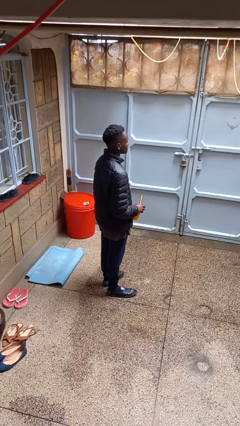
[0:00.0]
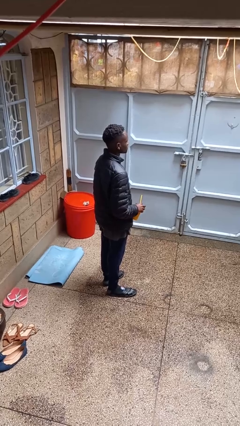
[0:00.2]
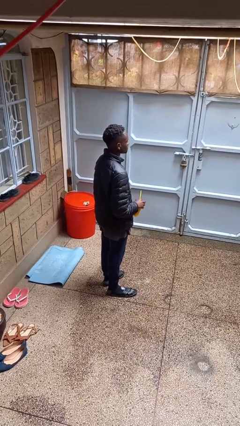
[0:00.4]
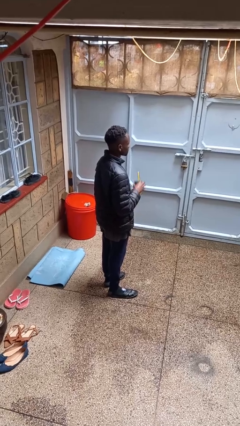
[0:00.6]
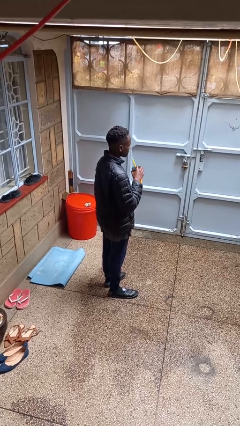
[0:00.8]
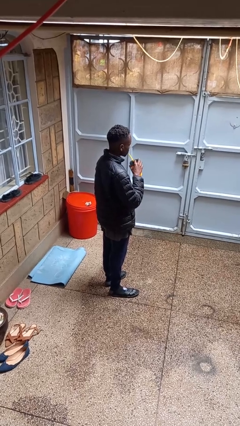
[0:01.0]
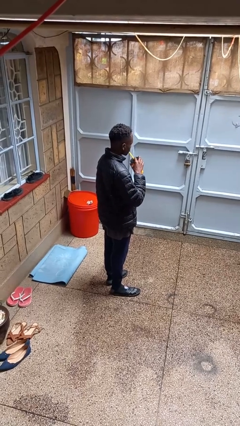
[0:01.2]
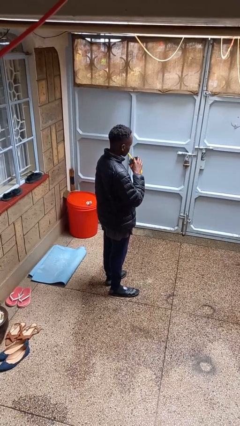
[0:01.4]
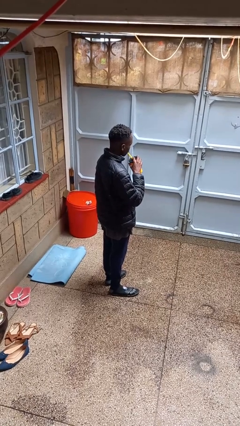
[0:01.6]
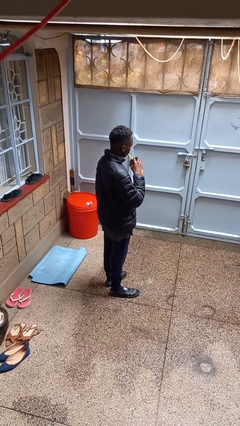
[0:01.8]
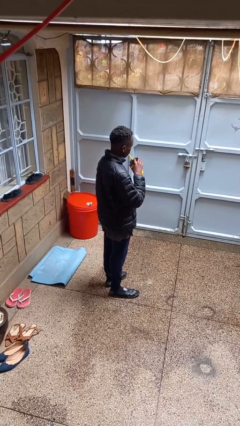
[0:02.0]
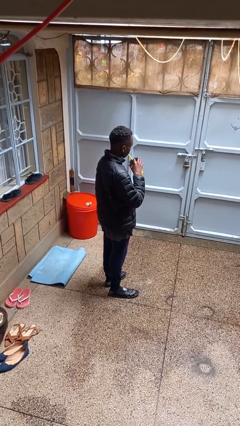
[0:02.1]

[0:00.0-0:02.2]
person drinks from straw

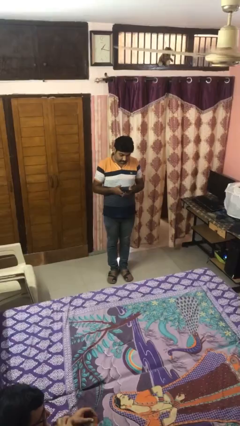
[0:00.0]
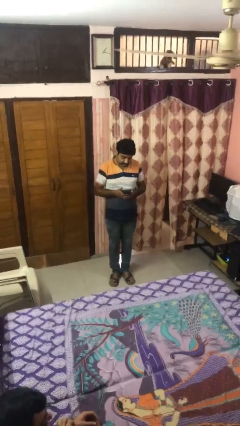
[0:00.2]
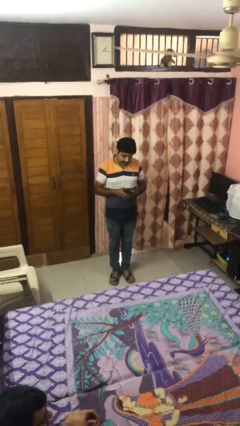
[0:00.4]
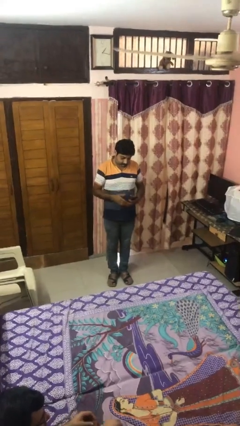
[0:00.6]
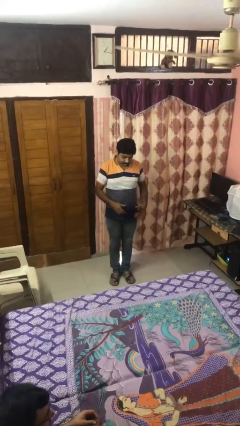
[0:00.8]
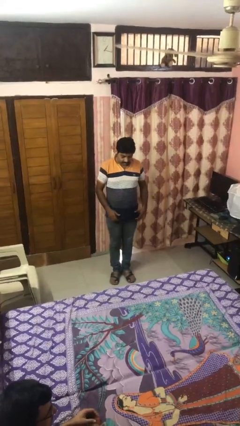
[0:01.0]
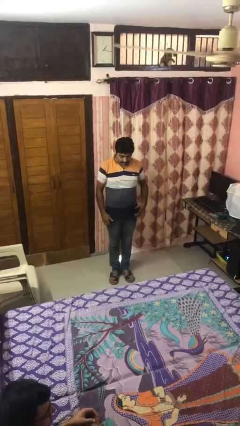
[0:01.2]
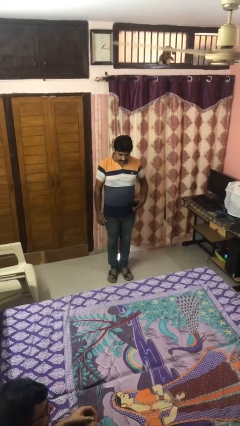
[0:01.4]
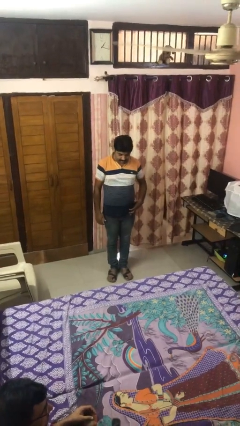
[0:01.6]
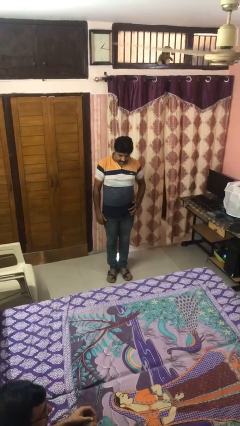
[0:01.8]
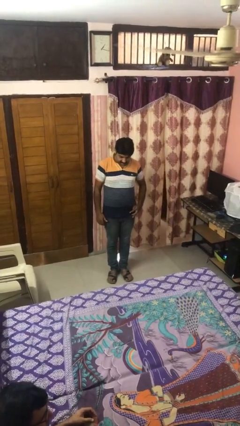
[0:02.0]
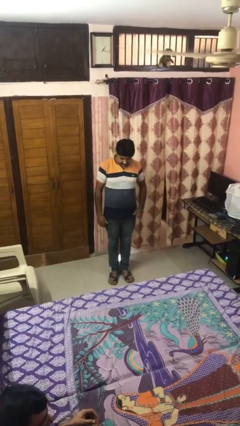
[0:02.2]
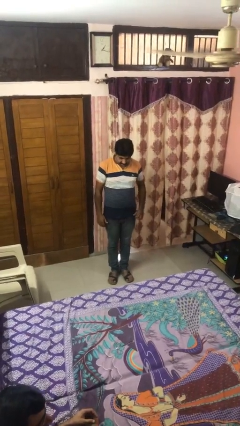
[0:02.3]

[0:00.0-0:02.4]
person puts phone into pocket

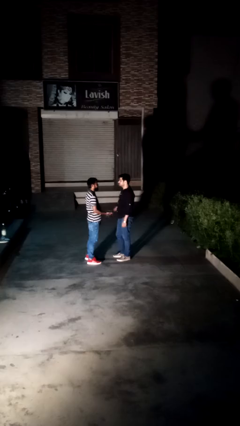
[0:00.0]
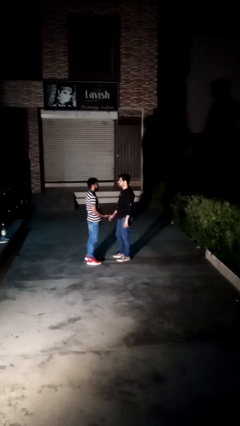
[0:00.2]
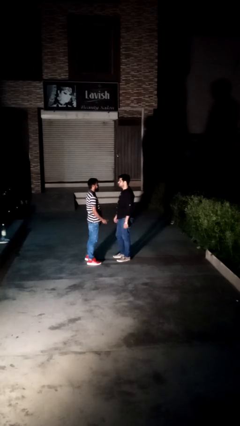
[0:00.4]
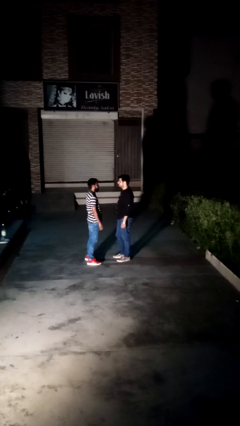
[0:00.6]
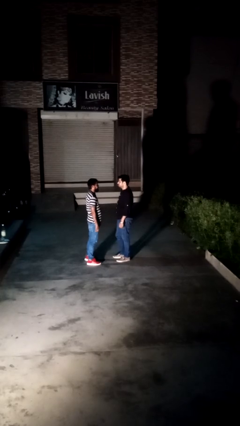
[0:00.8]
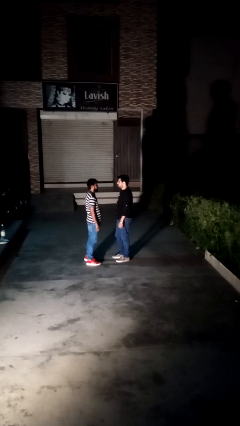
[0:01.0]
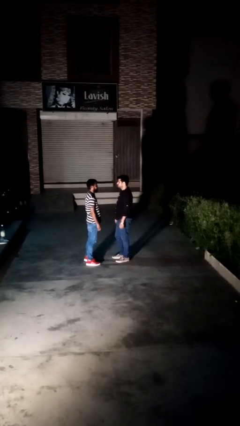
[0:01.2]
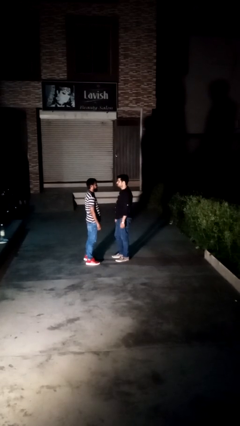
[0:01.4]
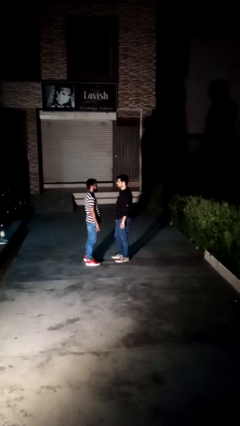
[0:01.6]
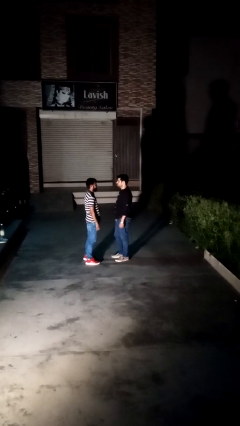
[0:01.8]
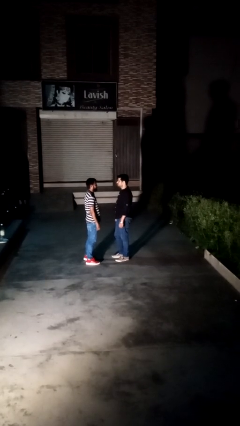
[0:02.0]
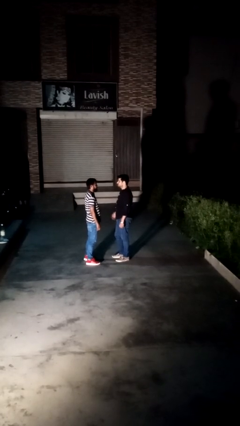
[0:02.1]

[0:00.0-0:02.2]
person highfives hand

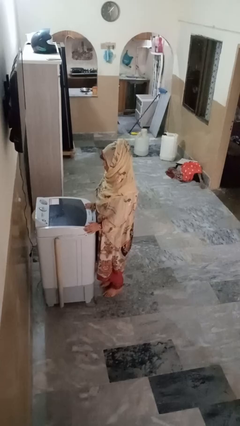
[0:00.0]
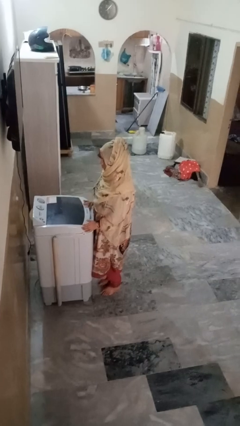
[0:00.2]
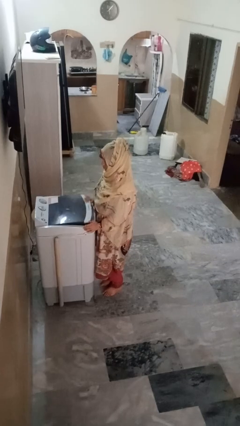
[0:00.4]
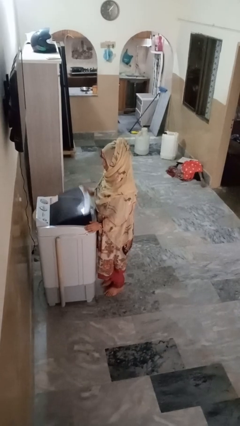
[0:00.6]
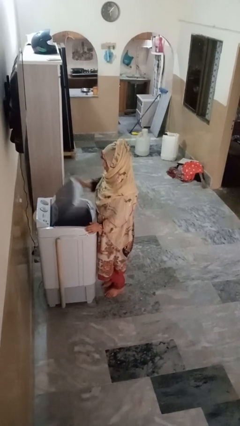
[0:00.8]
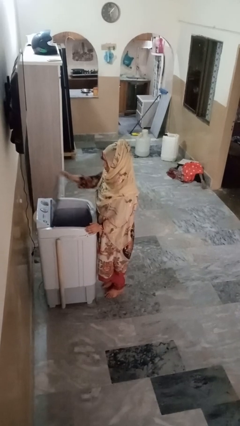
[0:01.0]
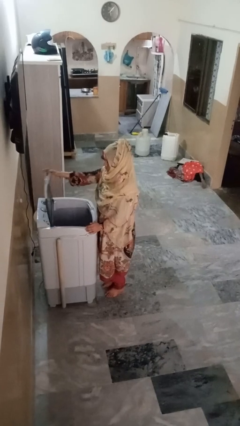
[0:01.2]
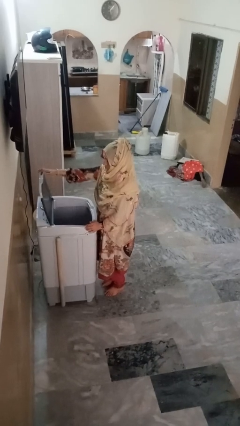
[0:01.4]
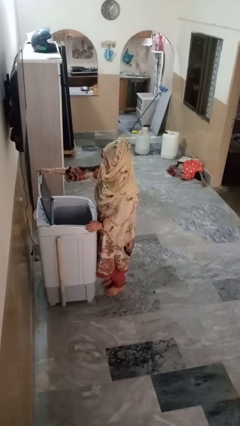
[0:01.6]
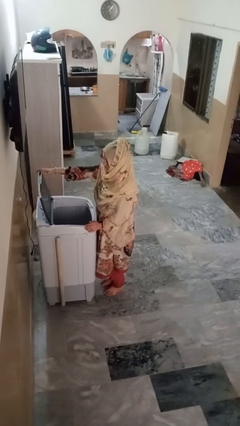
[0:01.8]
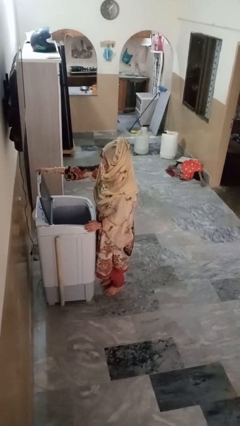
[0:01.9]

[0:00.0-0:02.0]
person opens clothes washer

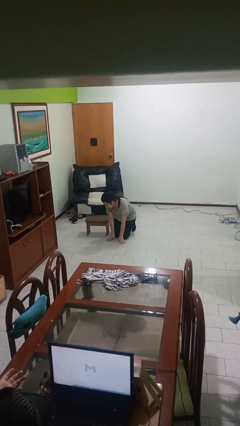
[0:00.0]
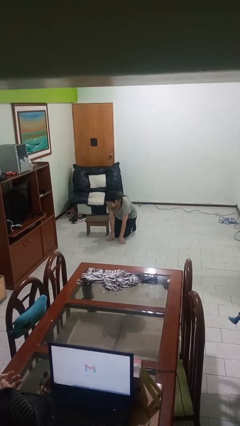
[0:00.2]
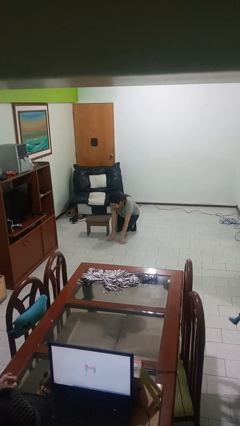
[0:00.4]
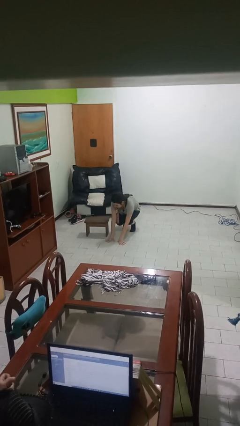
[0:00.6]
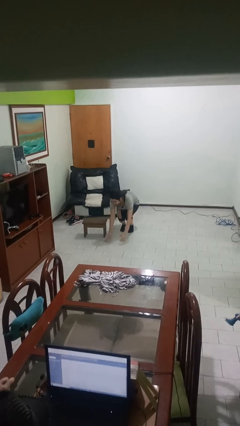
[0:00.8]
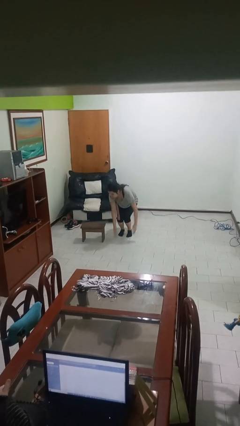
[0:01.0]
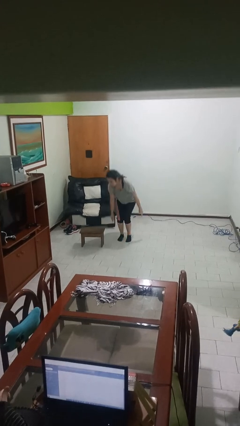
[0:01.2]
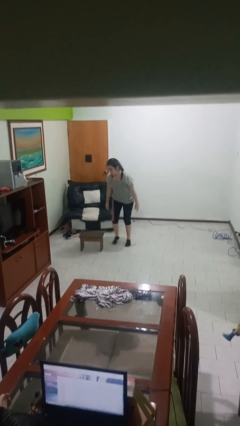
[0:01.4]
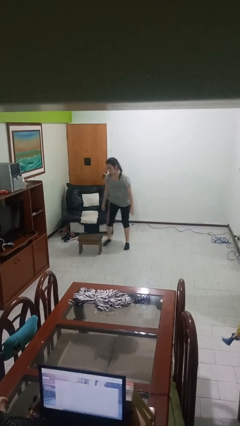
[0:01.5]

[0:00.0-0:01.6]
person stands up from floor

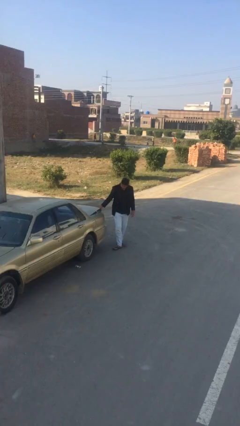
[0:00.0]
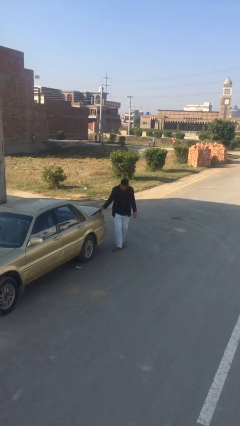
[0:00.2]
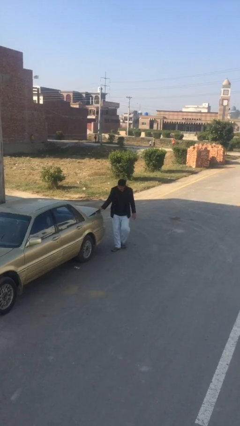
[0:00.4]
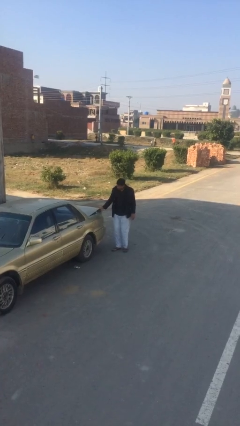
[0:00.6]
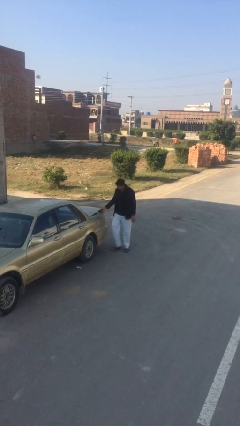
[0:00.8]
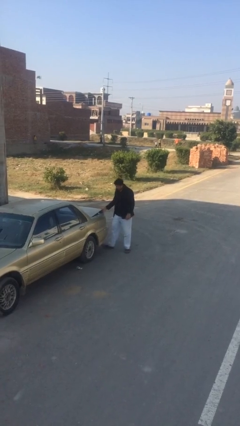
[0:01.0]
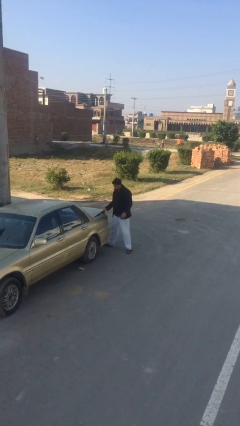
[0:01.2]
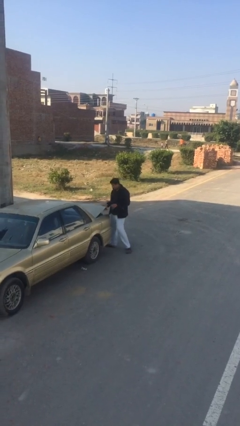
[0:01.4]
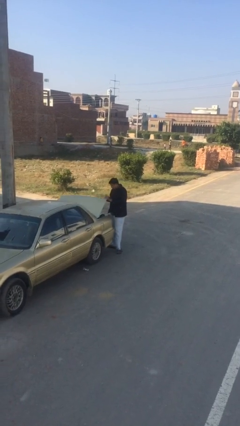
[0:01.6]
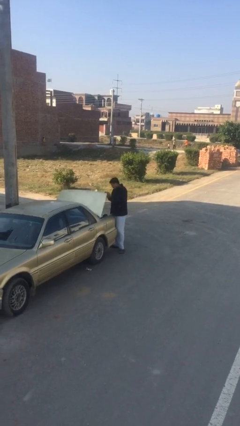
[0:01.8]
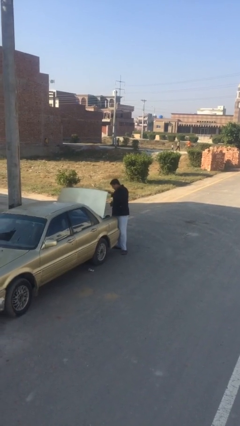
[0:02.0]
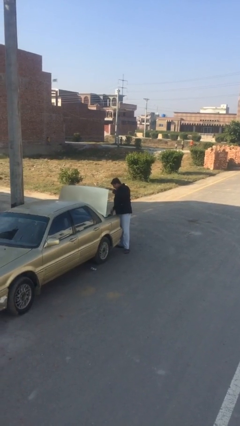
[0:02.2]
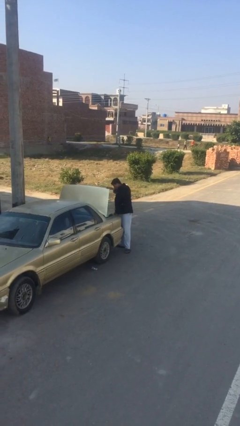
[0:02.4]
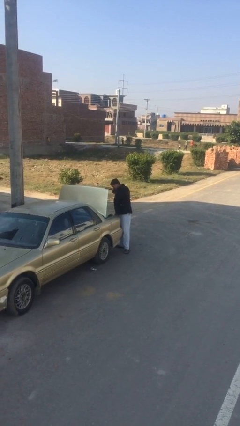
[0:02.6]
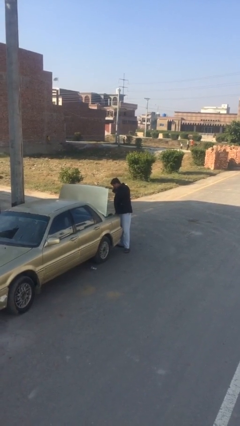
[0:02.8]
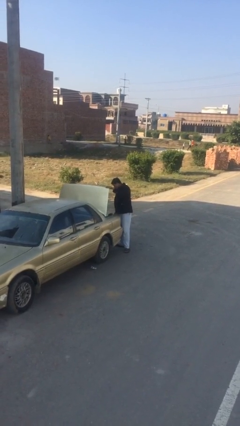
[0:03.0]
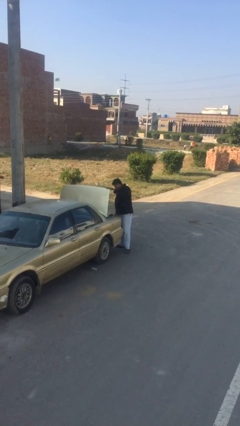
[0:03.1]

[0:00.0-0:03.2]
person opens car trunk

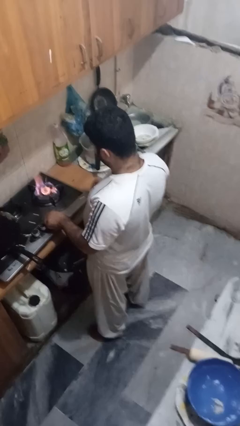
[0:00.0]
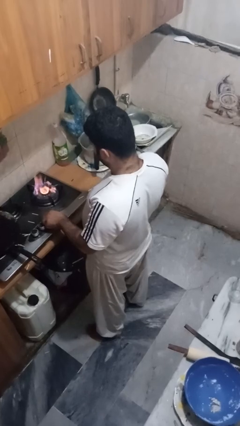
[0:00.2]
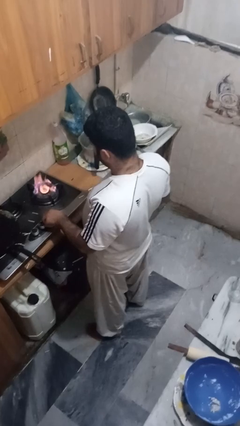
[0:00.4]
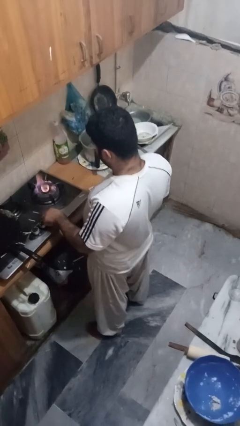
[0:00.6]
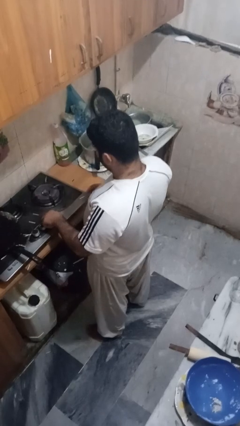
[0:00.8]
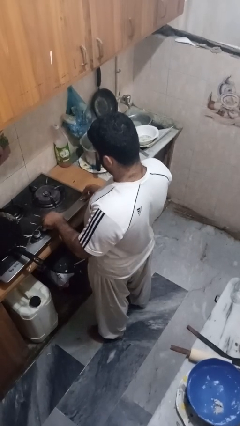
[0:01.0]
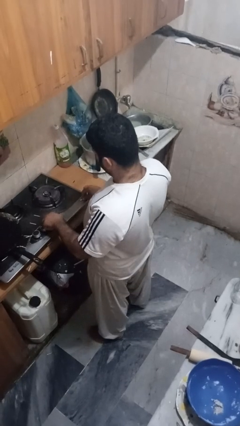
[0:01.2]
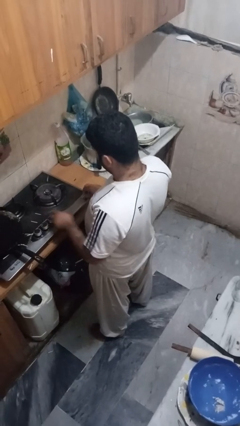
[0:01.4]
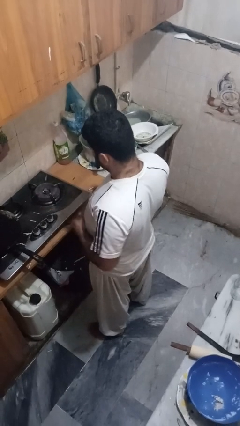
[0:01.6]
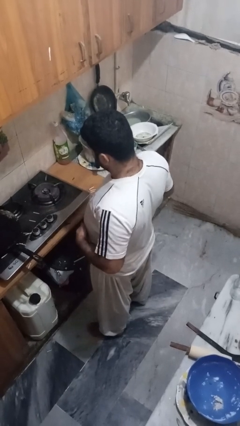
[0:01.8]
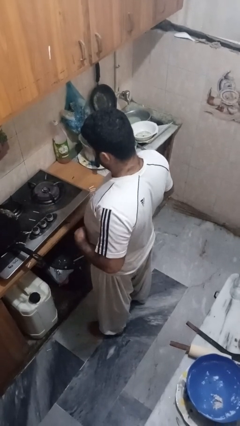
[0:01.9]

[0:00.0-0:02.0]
person turns off stovetop

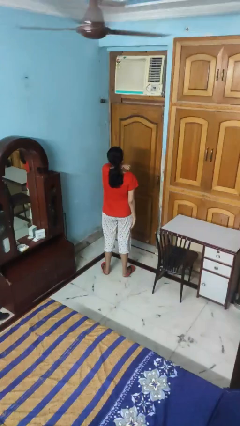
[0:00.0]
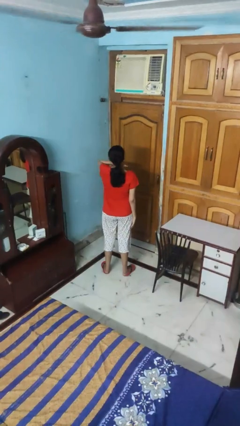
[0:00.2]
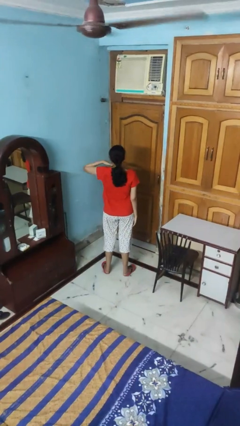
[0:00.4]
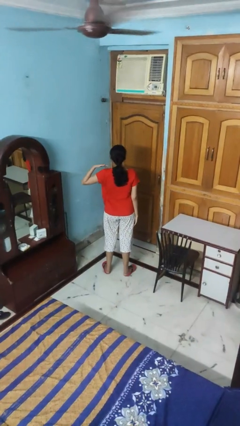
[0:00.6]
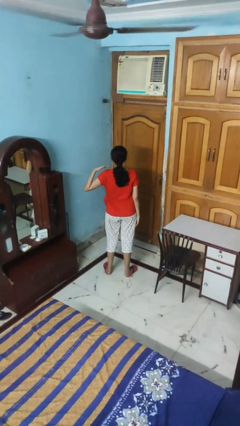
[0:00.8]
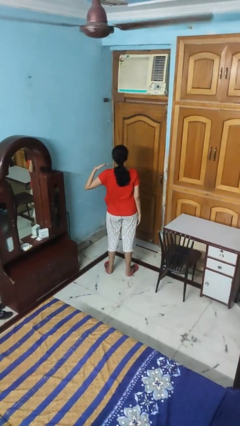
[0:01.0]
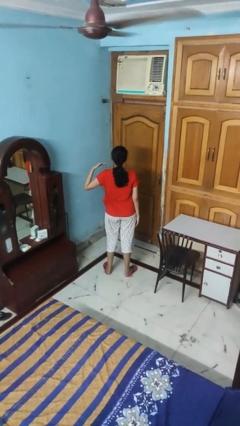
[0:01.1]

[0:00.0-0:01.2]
person gestures cut

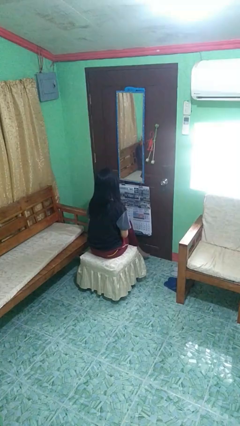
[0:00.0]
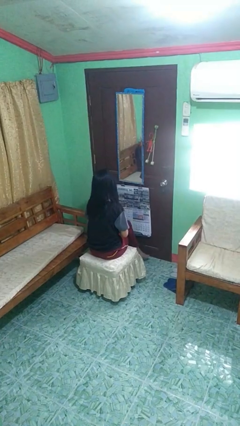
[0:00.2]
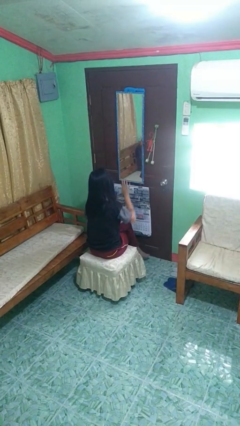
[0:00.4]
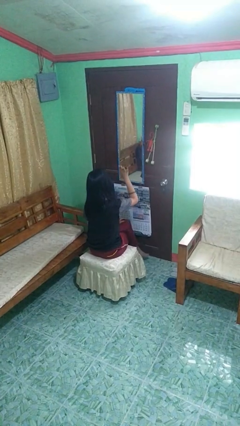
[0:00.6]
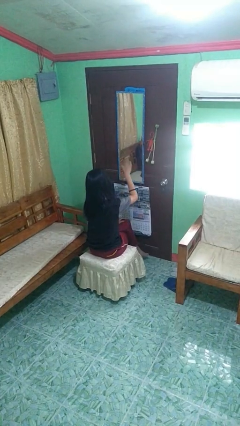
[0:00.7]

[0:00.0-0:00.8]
person gestures come here
